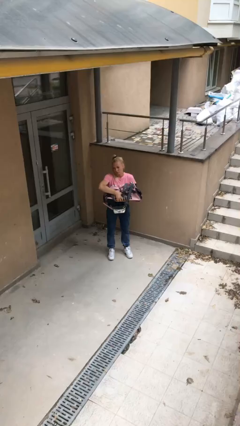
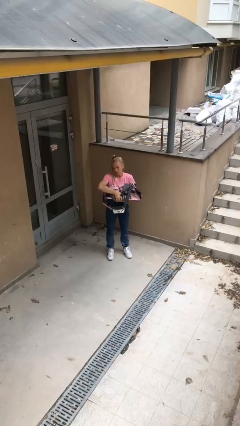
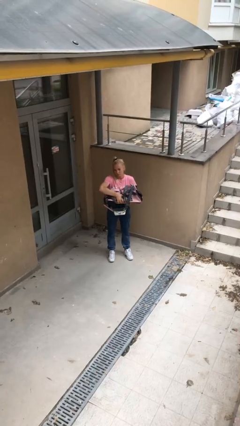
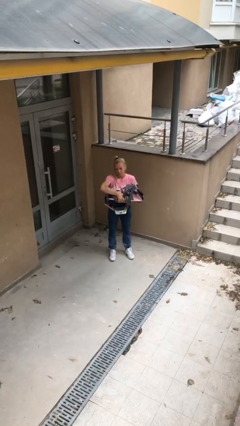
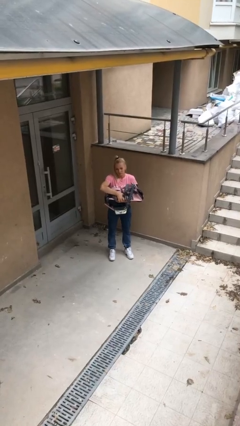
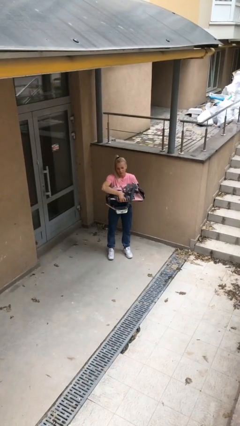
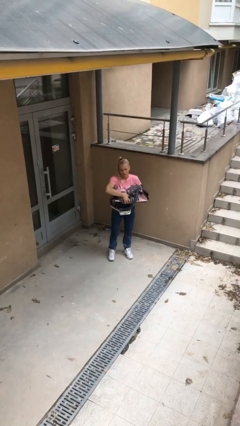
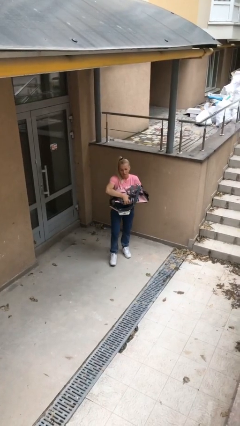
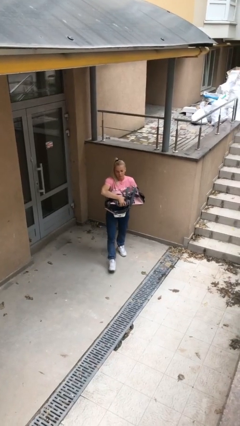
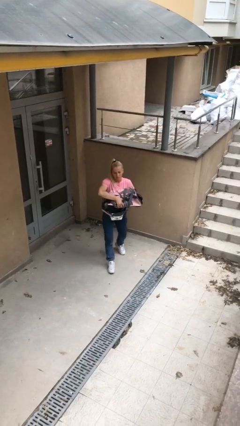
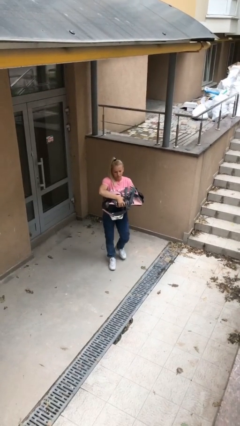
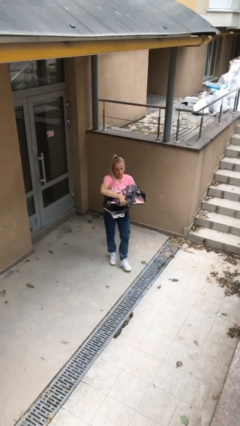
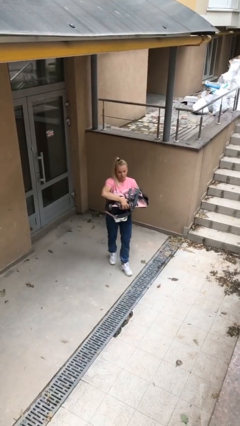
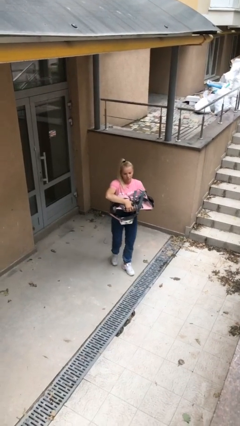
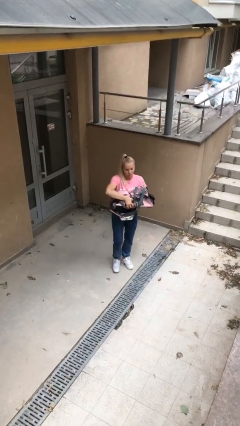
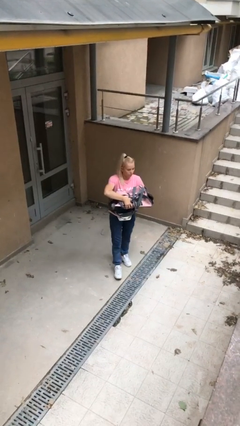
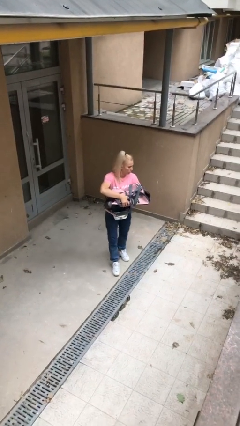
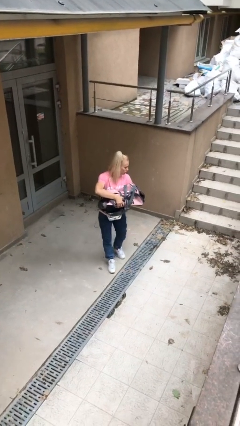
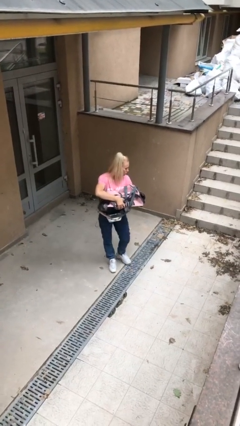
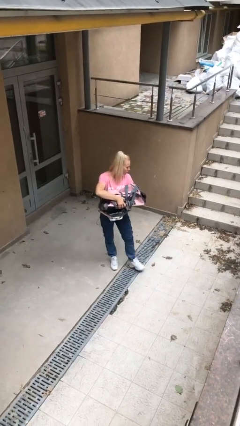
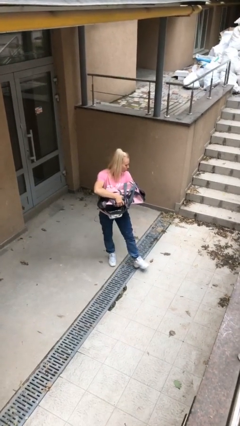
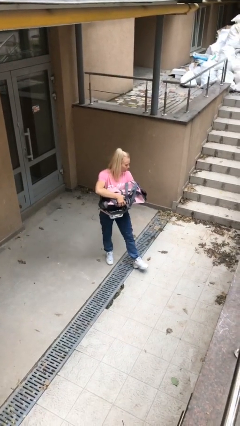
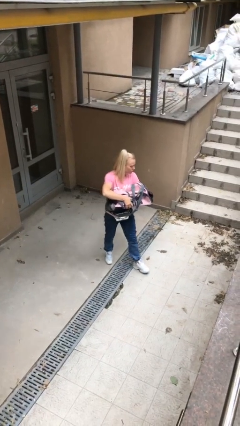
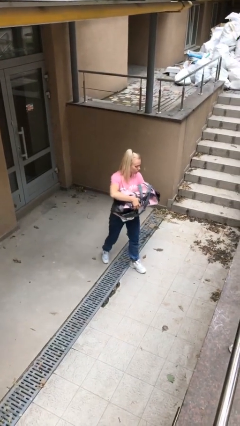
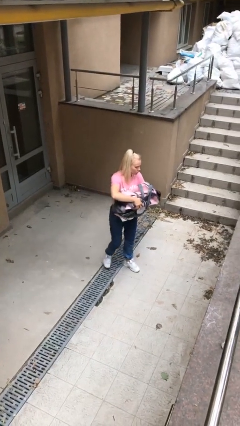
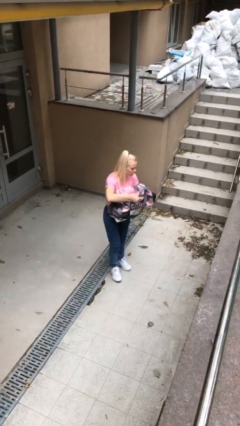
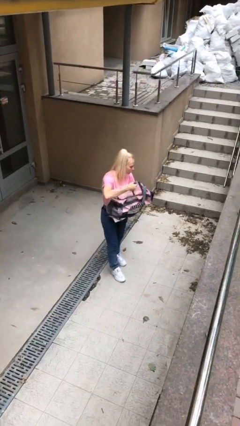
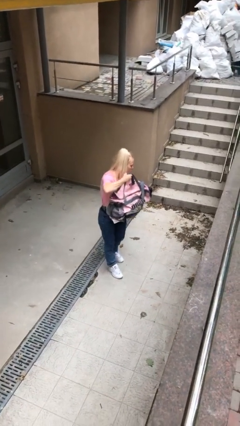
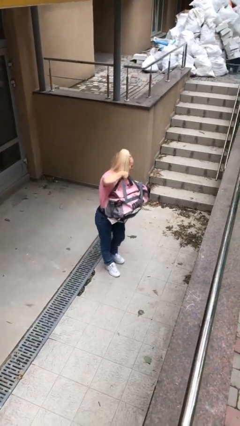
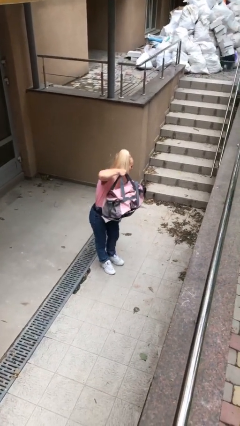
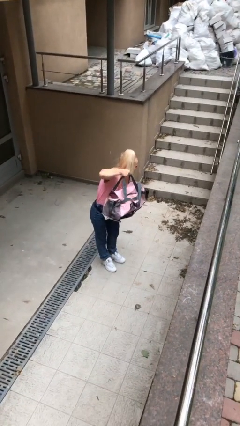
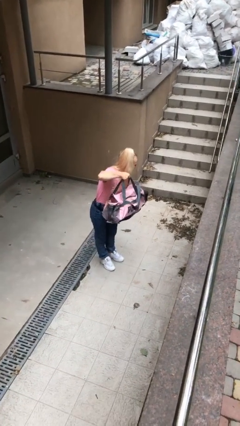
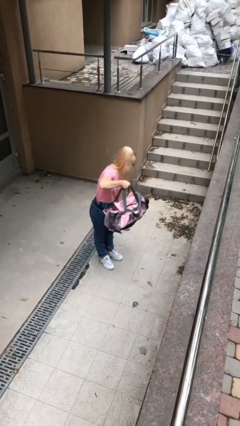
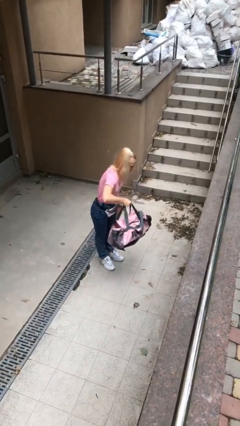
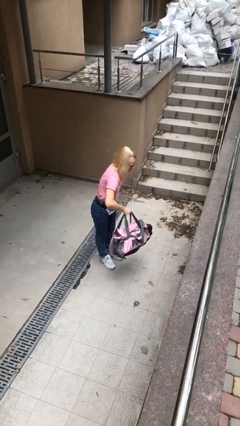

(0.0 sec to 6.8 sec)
person carries heavy object

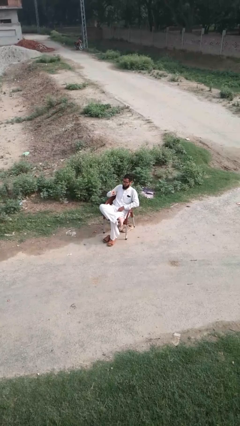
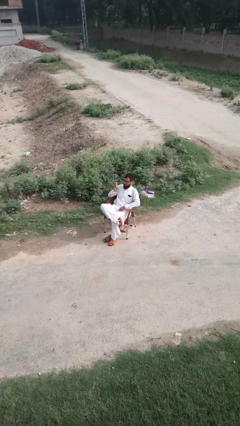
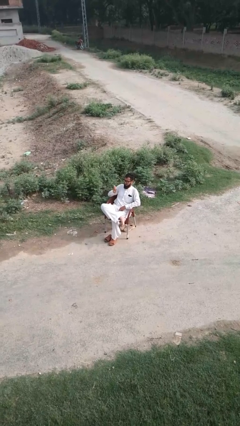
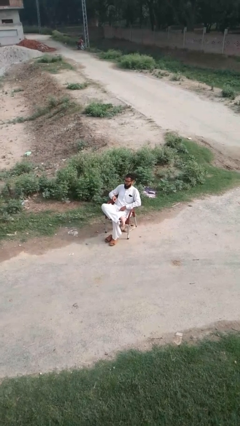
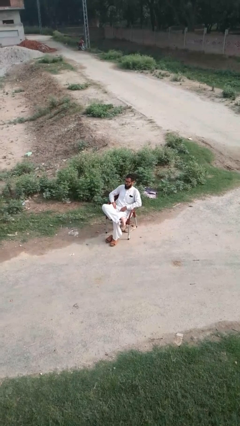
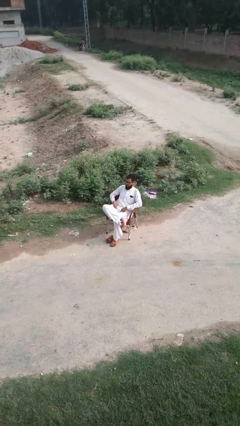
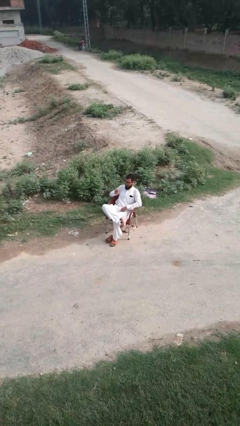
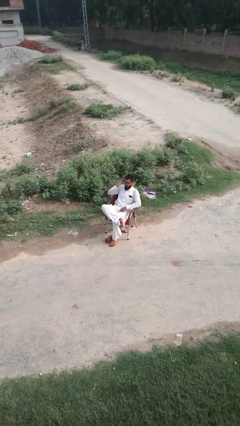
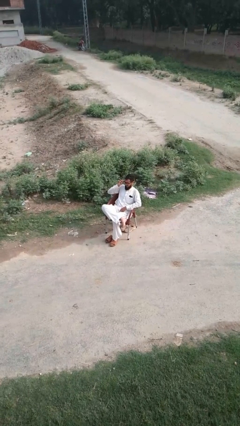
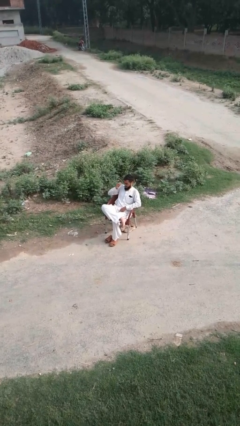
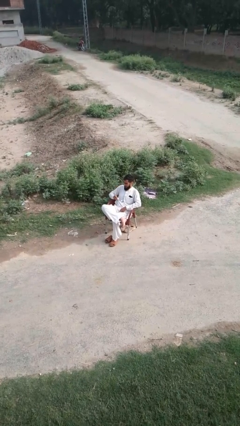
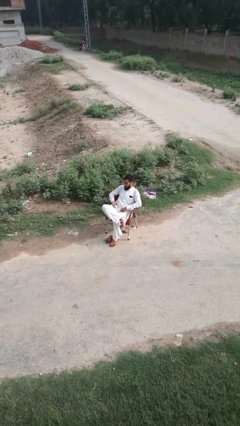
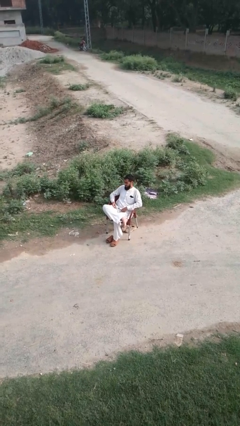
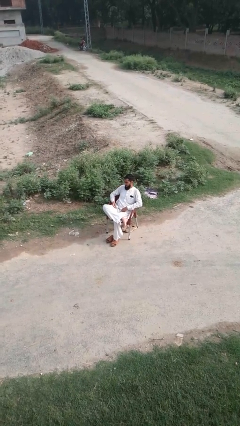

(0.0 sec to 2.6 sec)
person takes off glasses

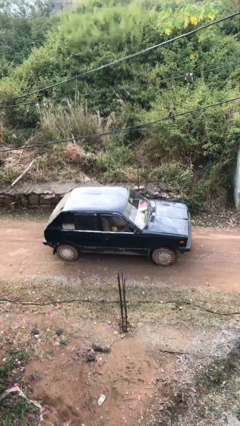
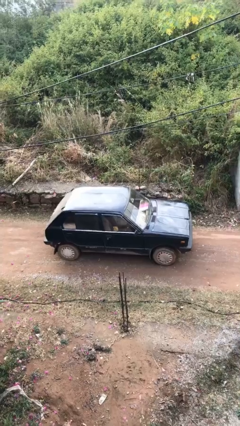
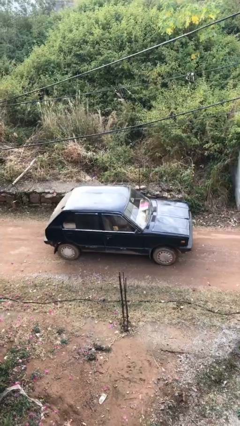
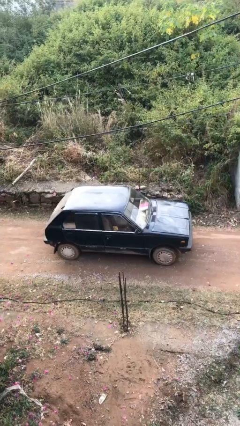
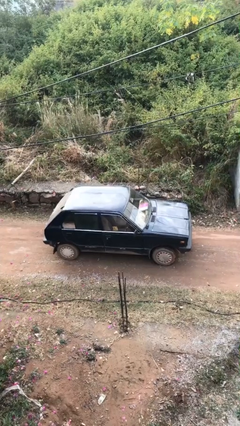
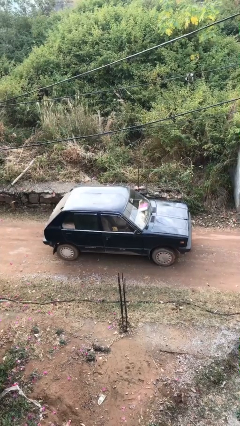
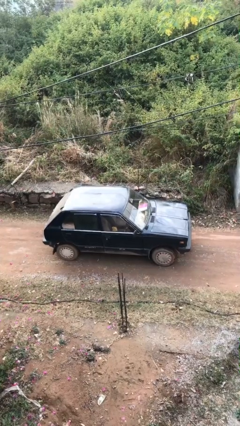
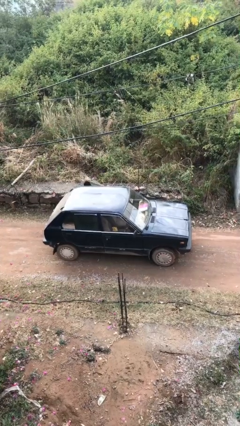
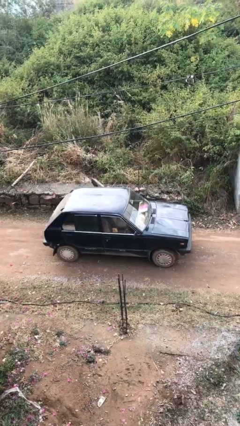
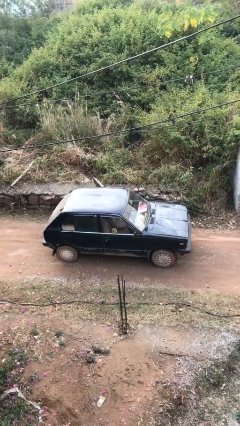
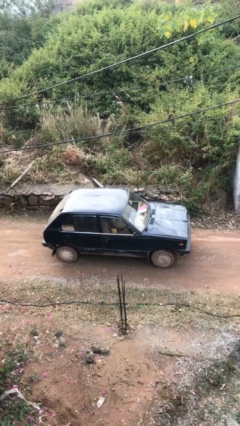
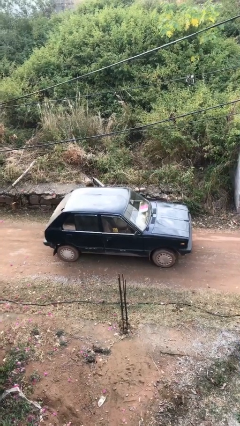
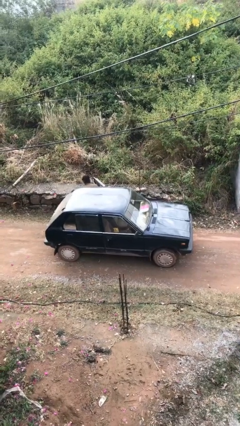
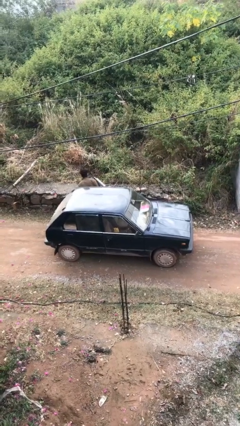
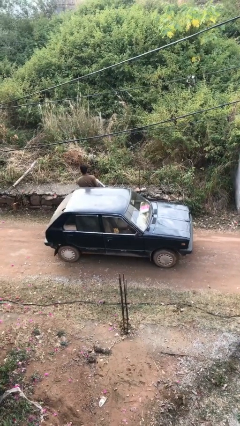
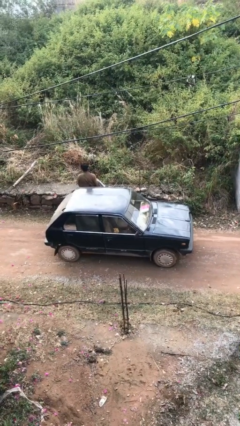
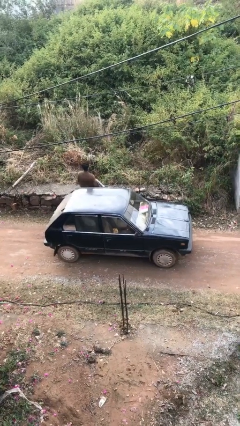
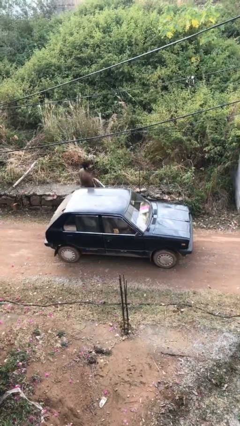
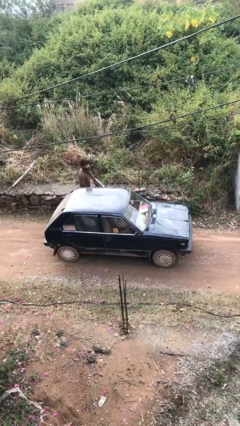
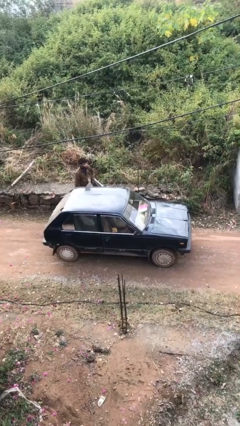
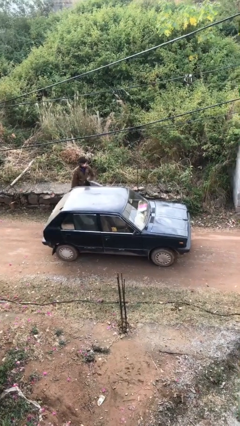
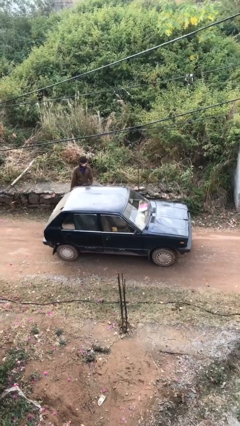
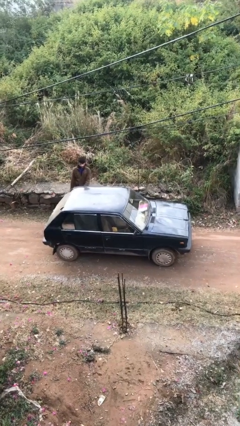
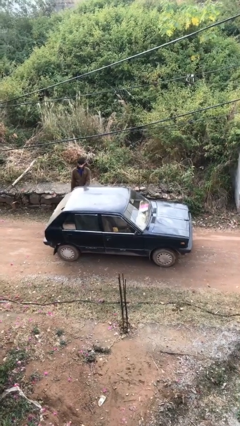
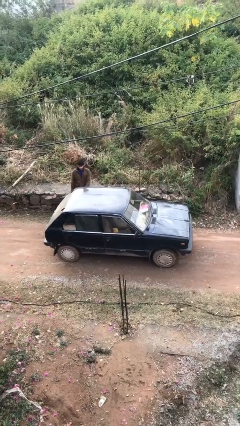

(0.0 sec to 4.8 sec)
car drops off person

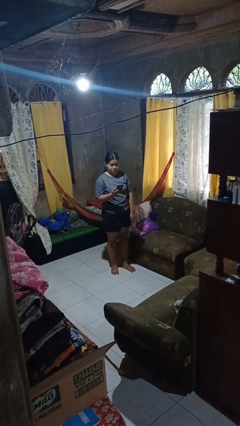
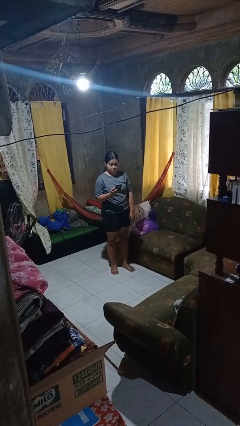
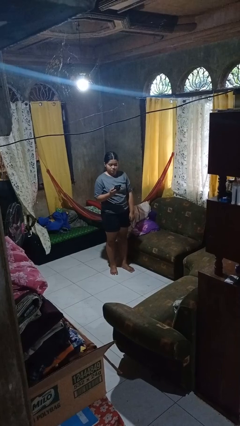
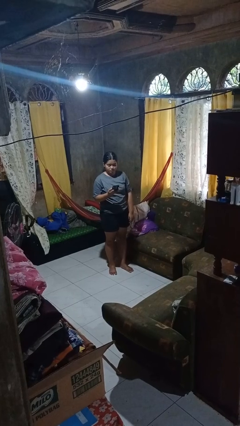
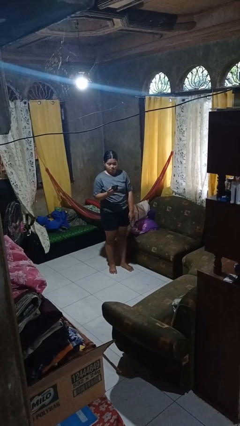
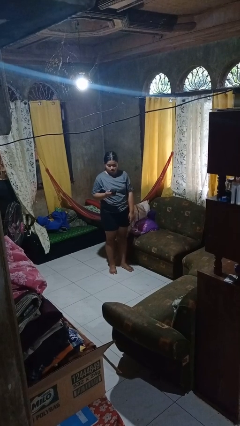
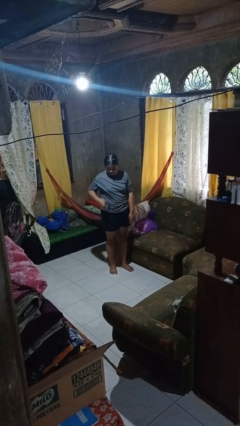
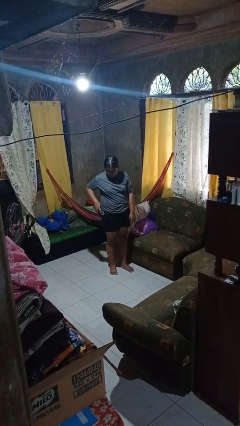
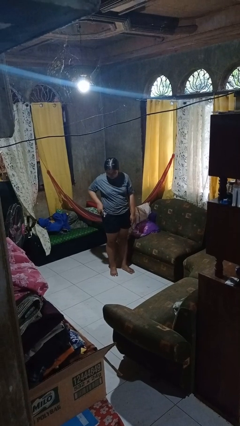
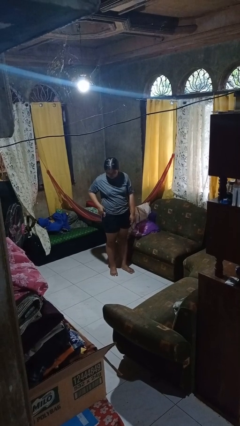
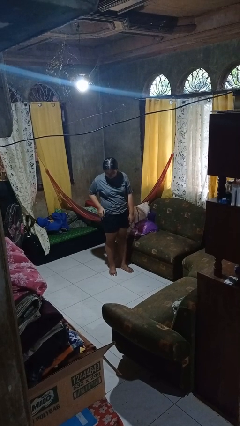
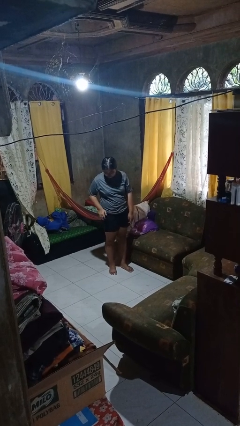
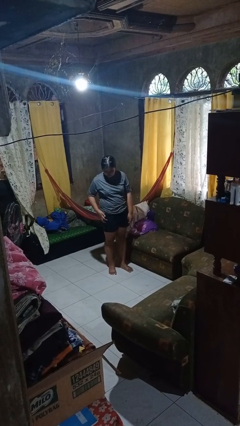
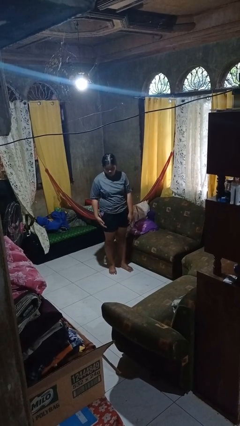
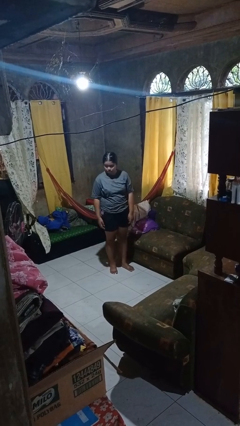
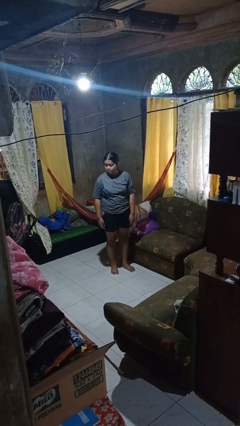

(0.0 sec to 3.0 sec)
person puts phone into pocket

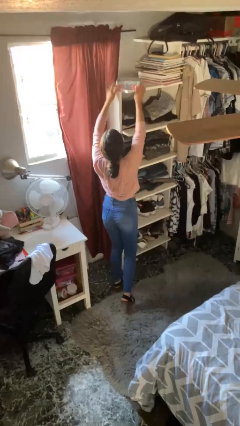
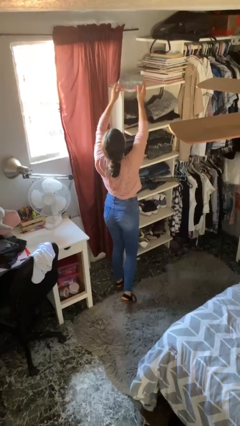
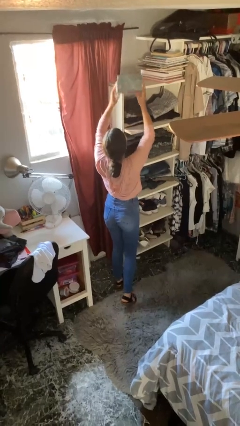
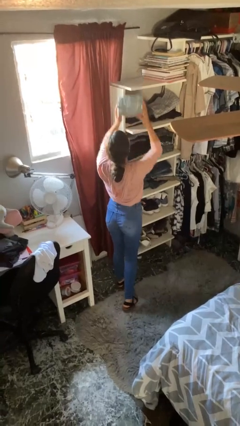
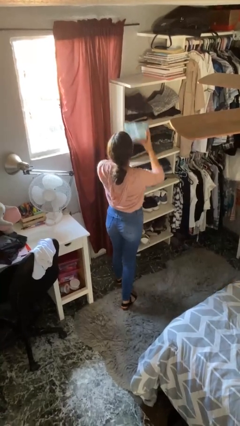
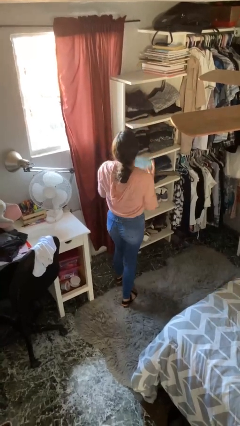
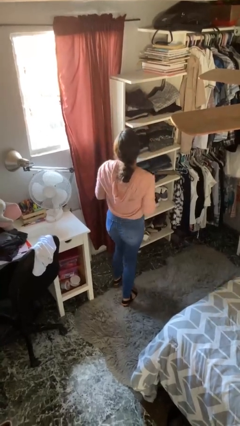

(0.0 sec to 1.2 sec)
person picks up object from shelf
